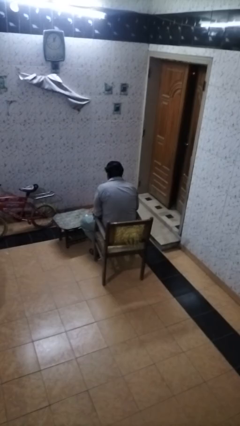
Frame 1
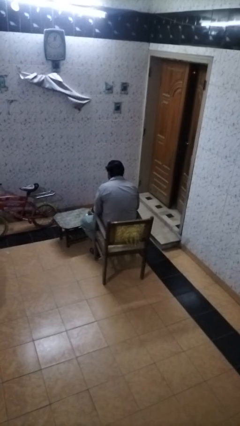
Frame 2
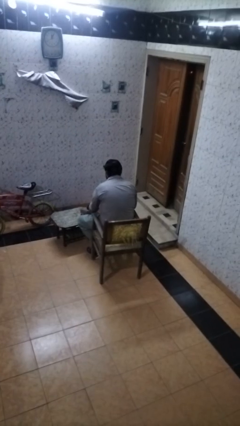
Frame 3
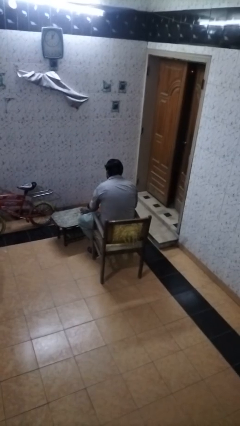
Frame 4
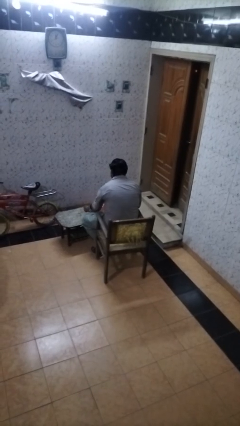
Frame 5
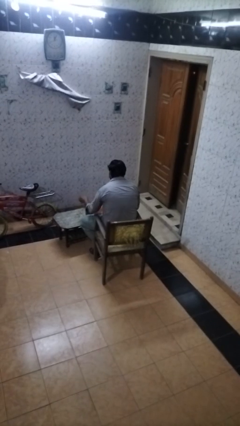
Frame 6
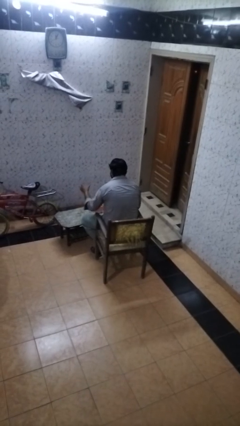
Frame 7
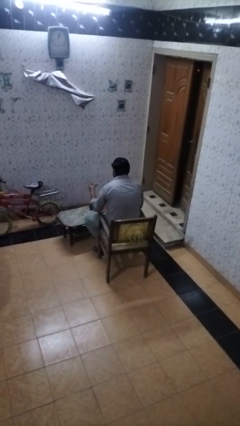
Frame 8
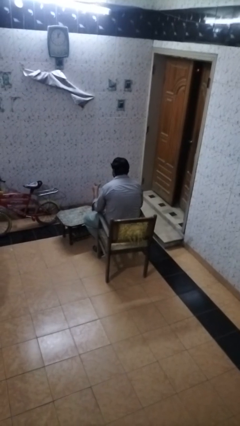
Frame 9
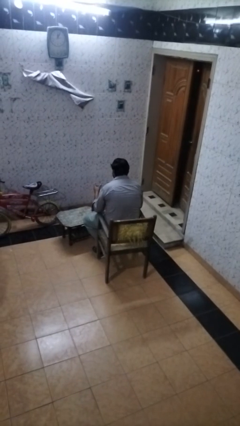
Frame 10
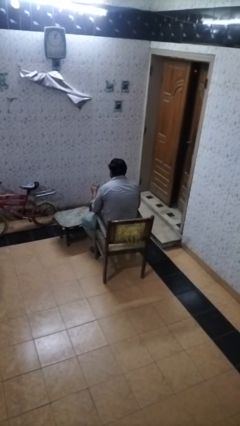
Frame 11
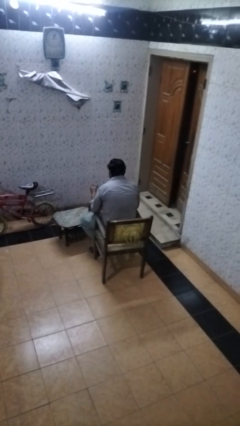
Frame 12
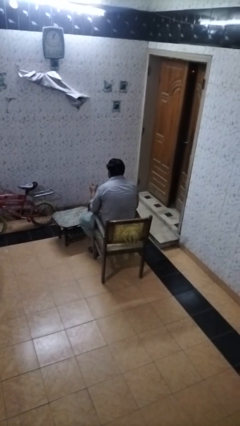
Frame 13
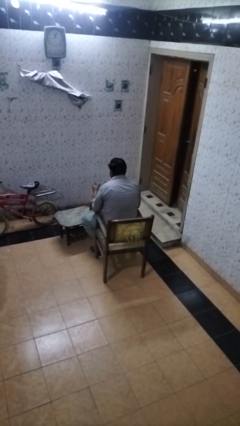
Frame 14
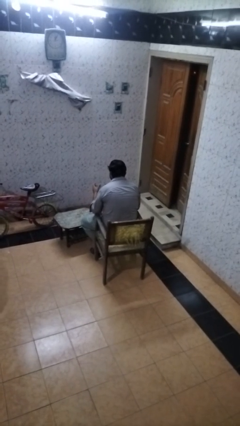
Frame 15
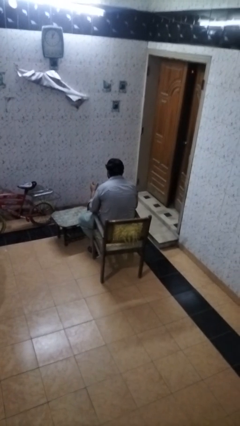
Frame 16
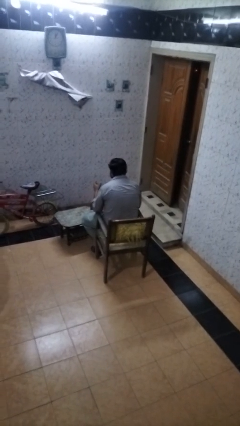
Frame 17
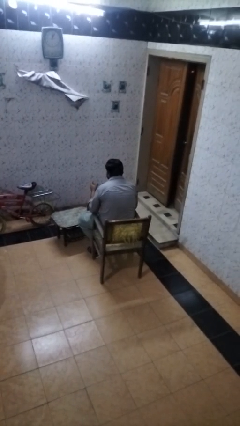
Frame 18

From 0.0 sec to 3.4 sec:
person picks up object from table

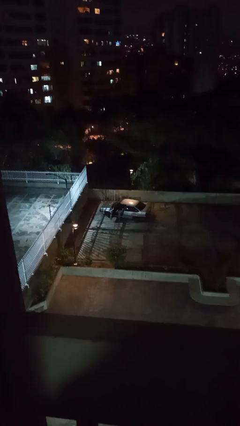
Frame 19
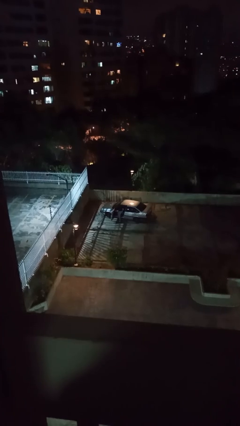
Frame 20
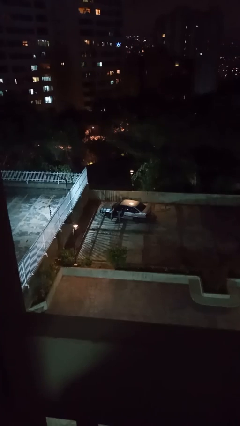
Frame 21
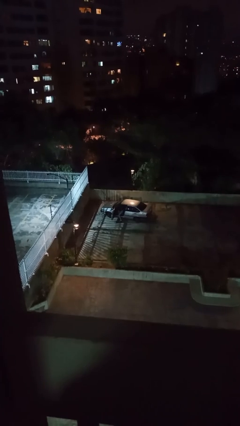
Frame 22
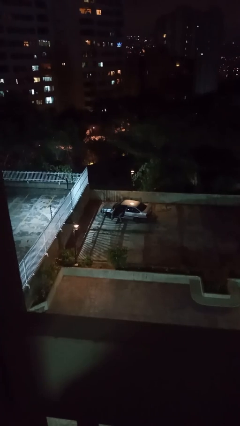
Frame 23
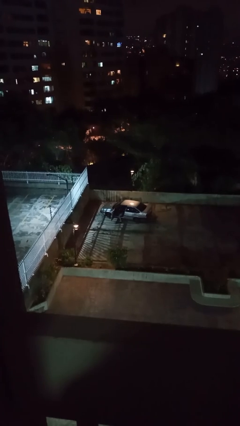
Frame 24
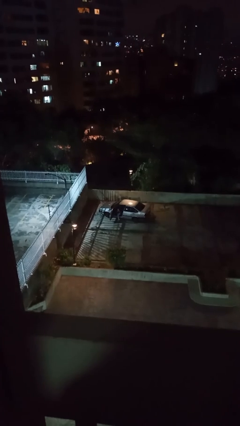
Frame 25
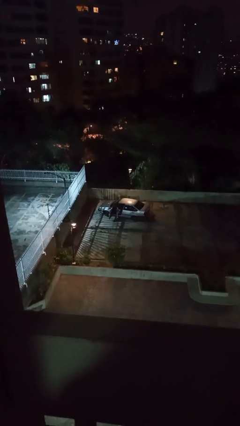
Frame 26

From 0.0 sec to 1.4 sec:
person enters car

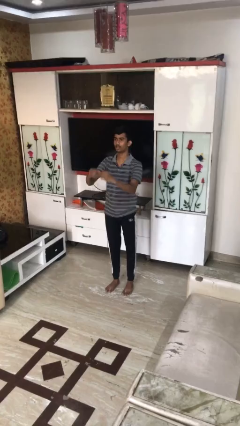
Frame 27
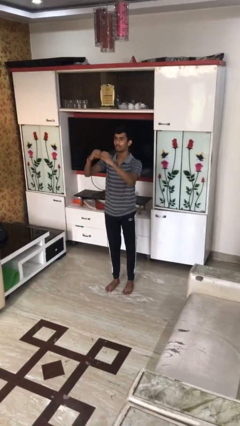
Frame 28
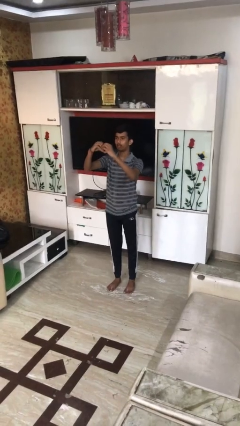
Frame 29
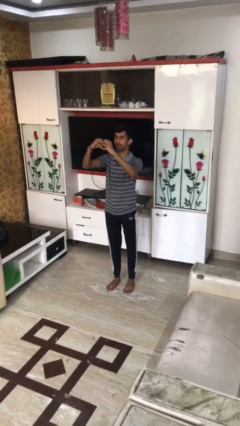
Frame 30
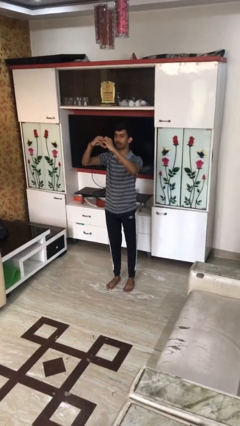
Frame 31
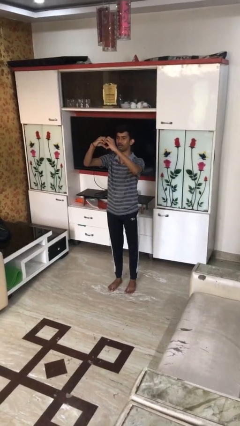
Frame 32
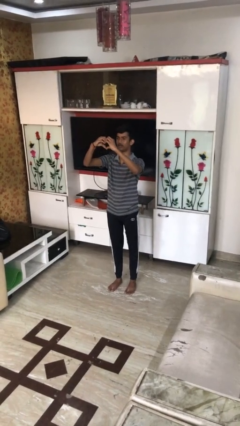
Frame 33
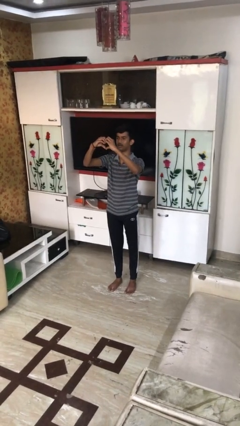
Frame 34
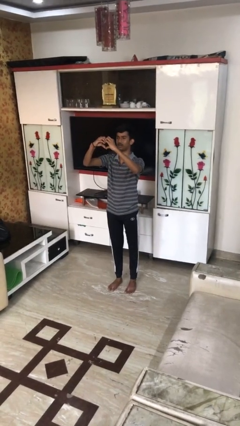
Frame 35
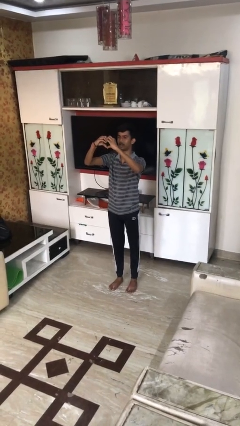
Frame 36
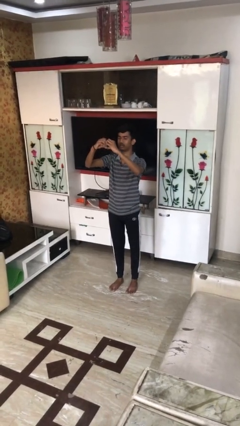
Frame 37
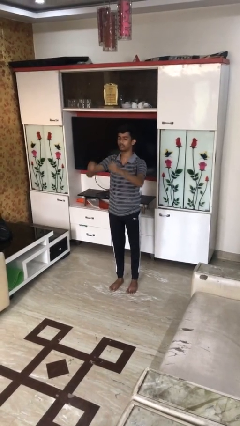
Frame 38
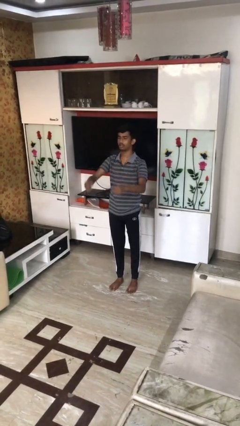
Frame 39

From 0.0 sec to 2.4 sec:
person gestures heart

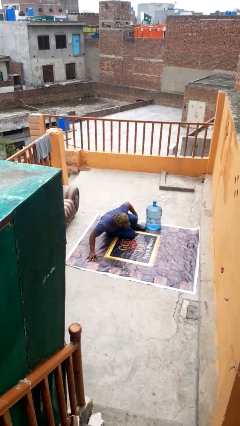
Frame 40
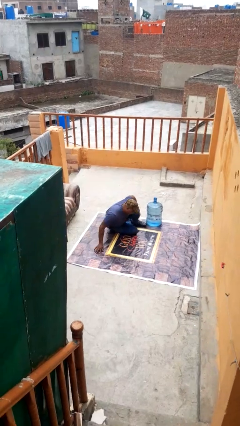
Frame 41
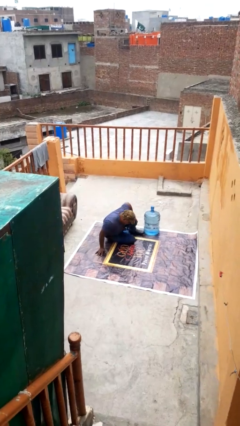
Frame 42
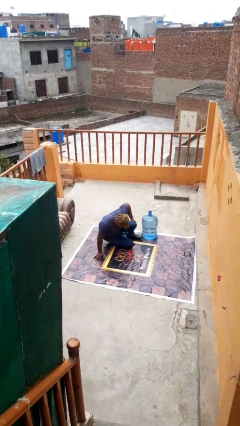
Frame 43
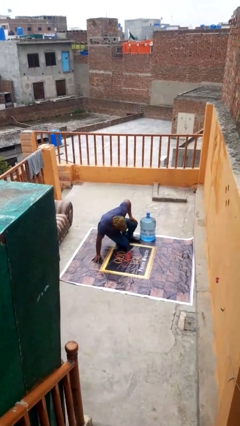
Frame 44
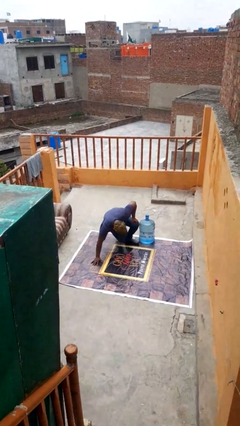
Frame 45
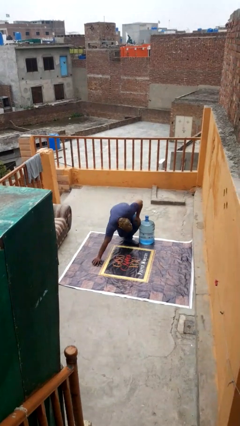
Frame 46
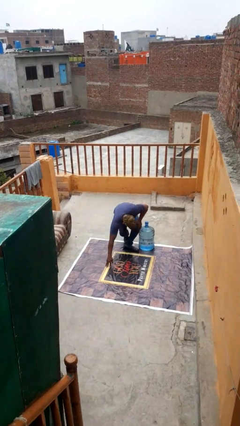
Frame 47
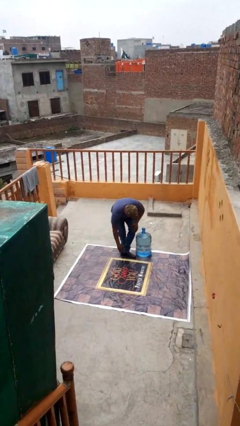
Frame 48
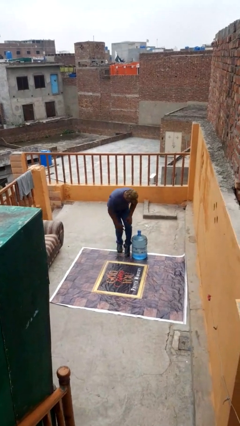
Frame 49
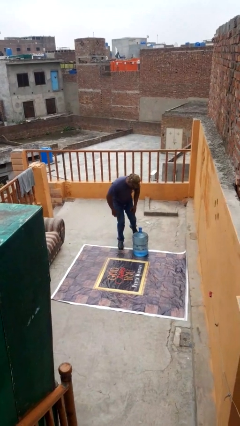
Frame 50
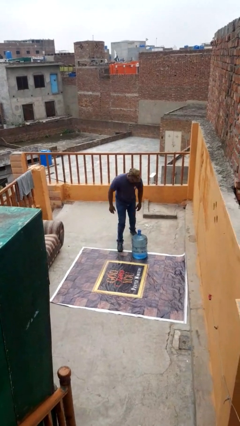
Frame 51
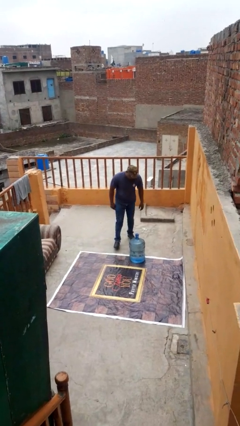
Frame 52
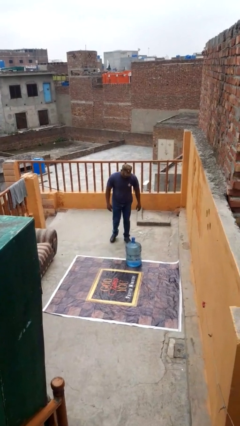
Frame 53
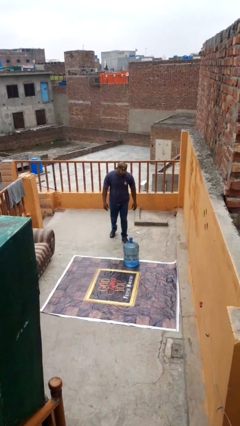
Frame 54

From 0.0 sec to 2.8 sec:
person stands up from floor

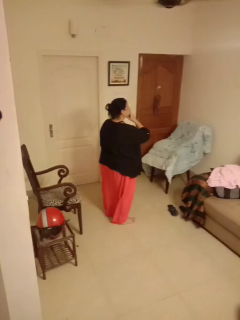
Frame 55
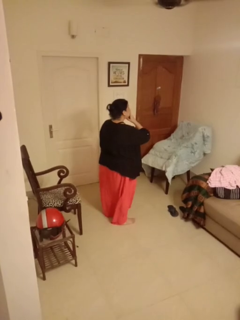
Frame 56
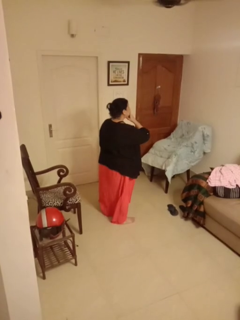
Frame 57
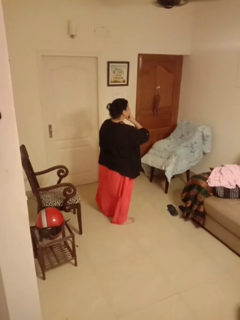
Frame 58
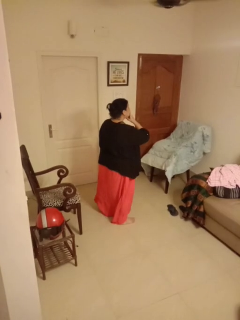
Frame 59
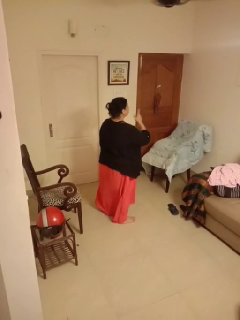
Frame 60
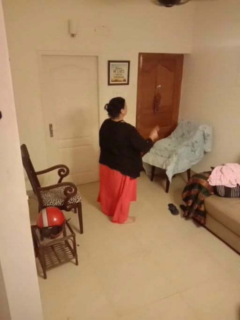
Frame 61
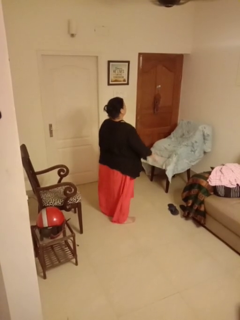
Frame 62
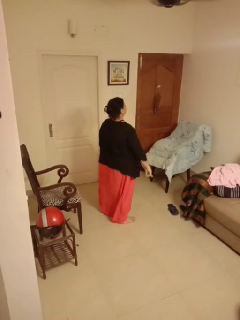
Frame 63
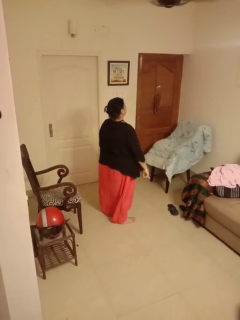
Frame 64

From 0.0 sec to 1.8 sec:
person gestures be quiet

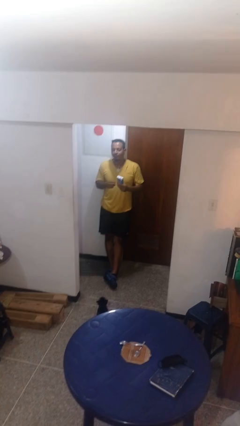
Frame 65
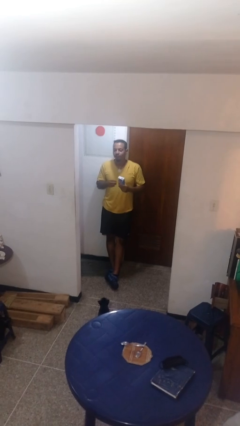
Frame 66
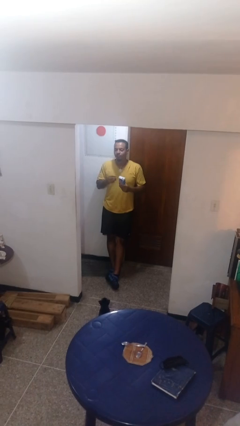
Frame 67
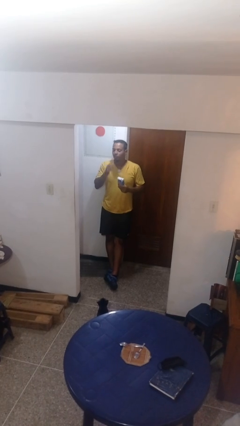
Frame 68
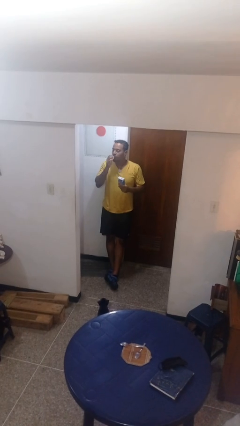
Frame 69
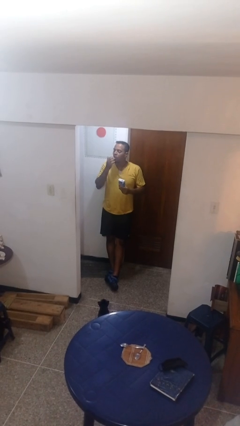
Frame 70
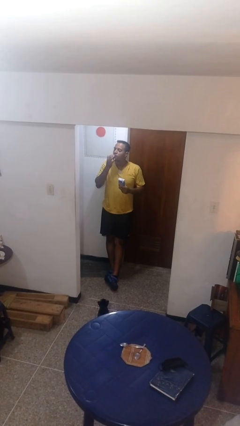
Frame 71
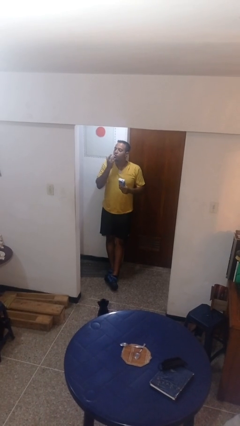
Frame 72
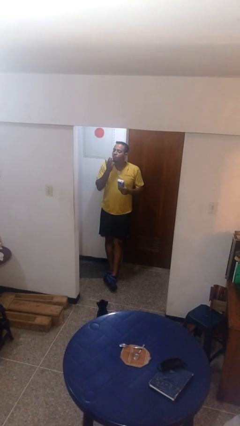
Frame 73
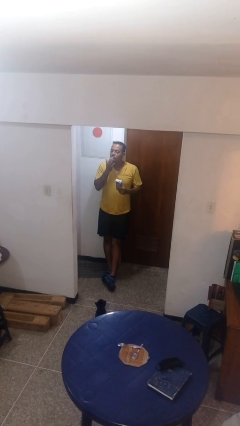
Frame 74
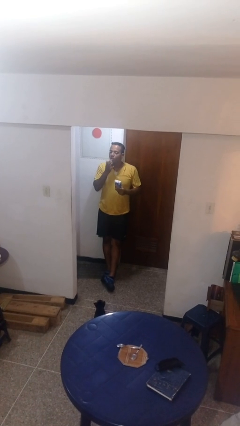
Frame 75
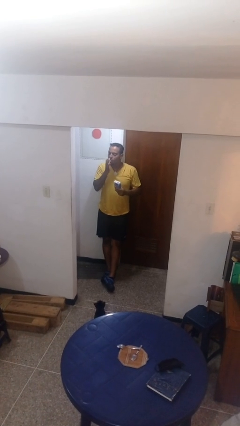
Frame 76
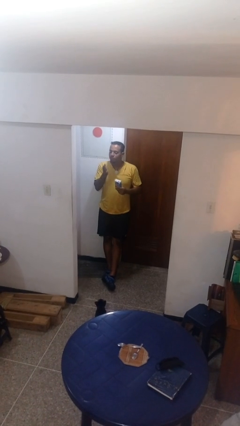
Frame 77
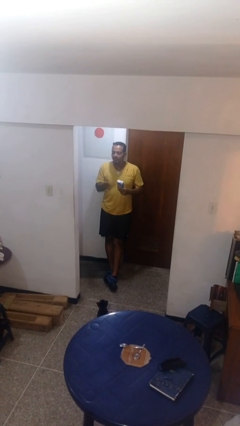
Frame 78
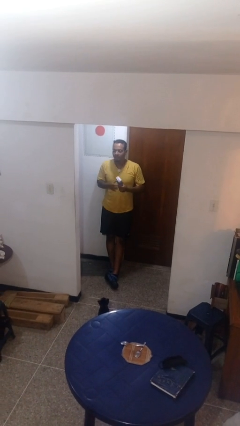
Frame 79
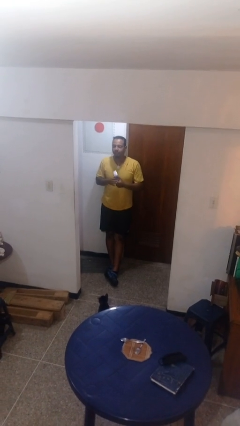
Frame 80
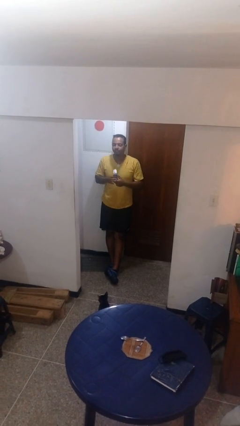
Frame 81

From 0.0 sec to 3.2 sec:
person licks fingers

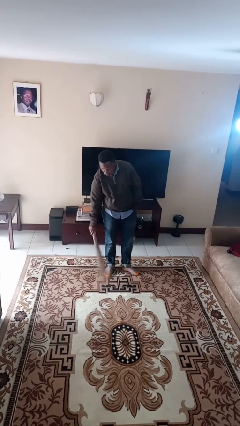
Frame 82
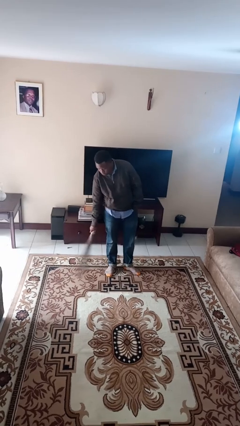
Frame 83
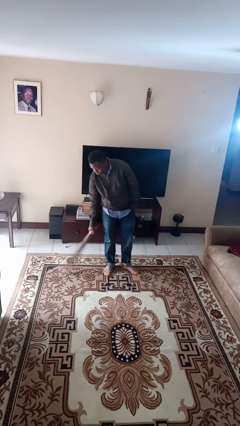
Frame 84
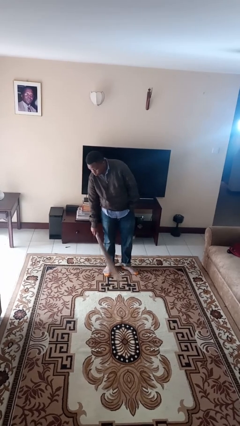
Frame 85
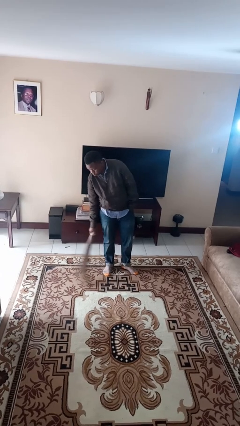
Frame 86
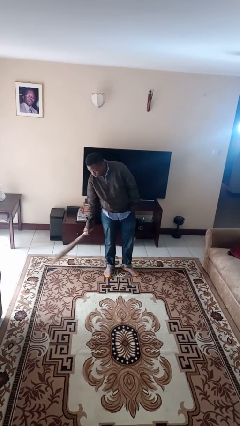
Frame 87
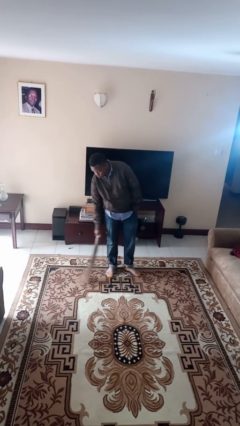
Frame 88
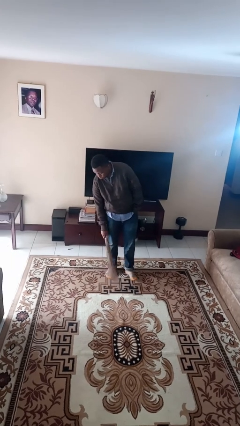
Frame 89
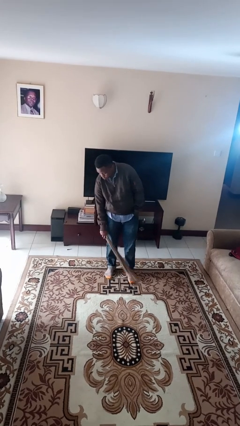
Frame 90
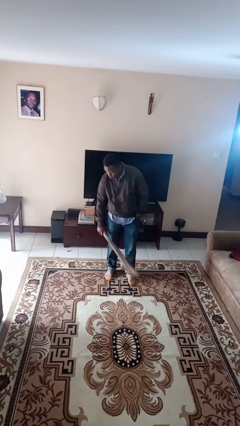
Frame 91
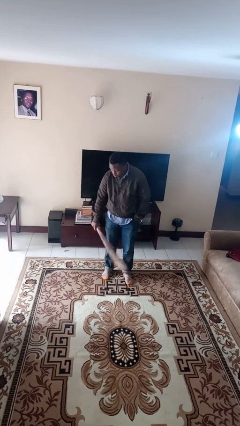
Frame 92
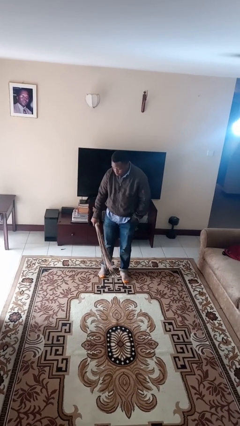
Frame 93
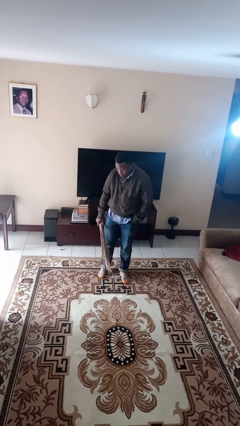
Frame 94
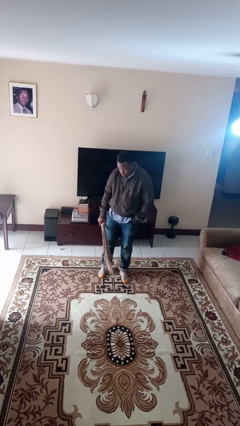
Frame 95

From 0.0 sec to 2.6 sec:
person sweeps floor

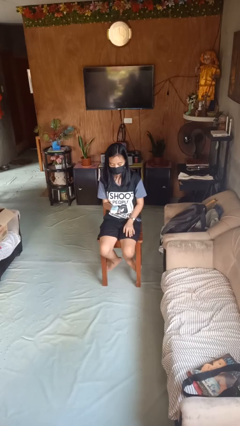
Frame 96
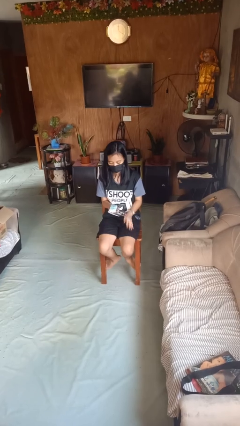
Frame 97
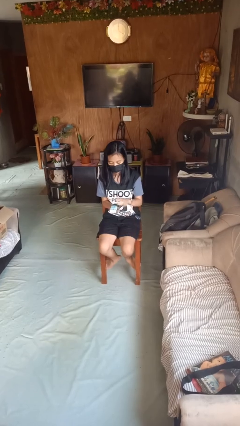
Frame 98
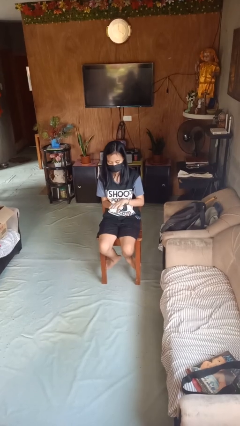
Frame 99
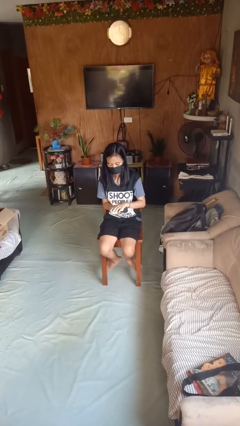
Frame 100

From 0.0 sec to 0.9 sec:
person opens jewelry box
